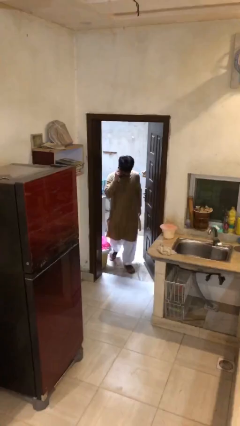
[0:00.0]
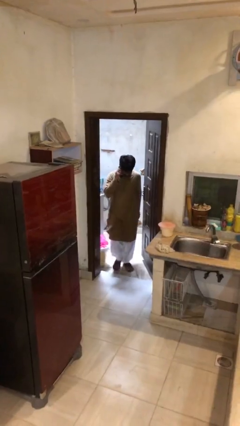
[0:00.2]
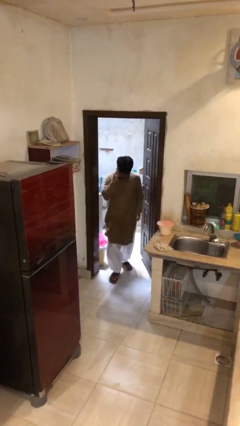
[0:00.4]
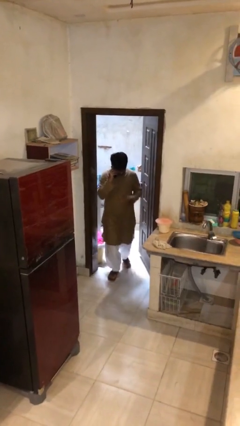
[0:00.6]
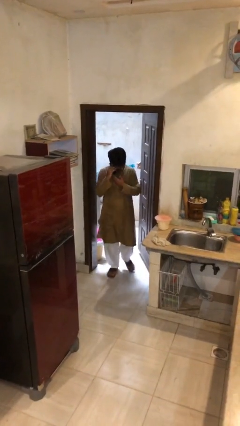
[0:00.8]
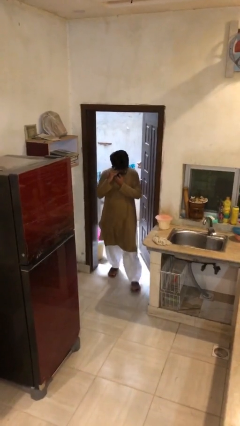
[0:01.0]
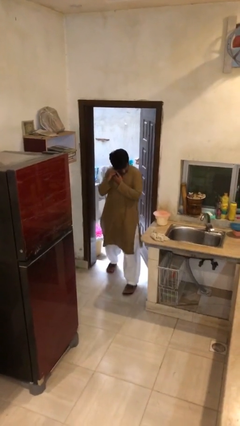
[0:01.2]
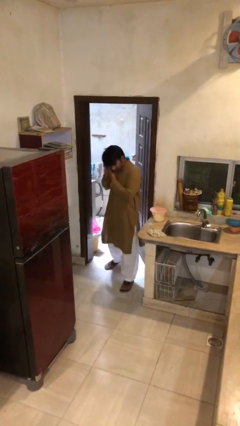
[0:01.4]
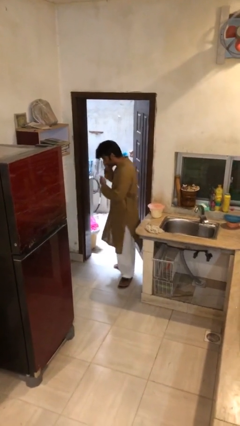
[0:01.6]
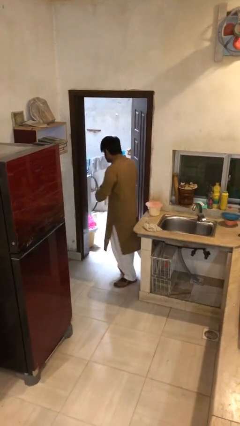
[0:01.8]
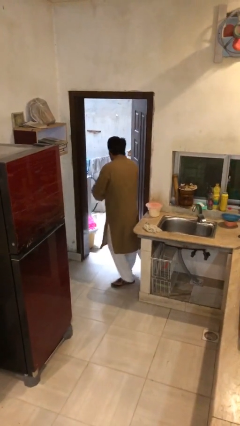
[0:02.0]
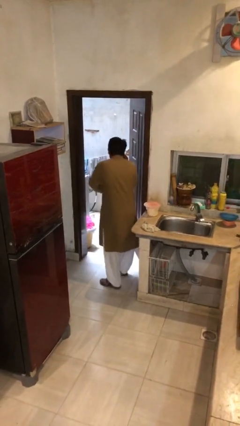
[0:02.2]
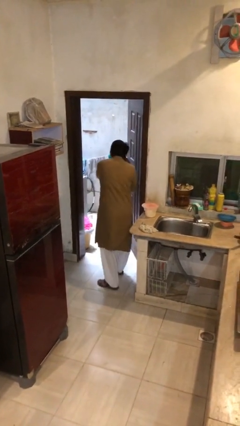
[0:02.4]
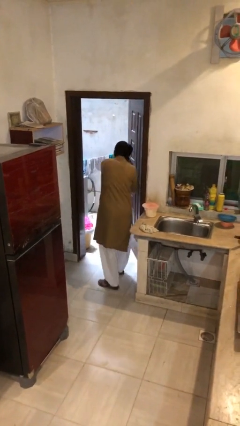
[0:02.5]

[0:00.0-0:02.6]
person enters scene through structure

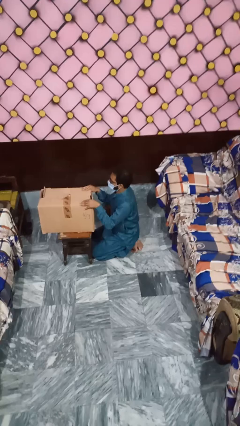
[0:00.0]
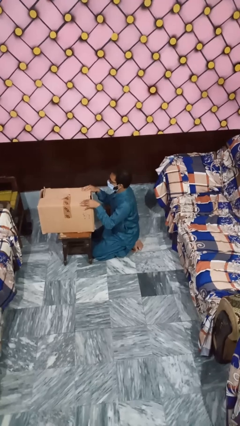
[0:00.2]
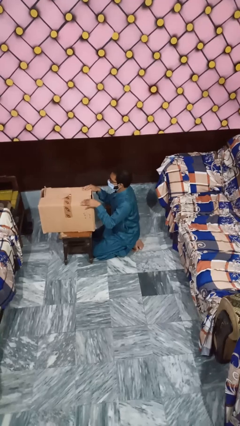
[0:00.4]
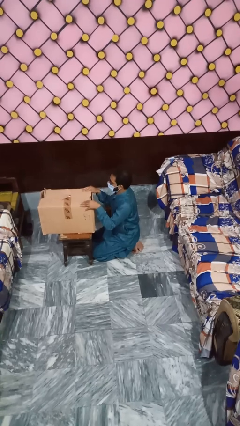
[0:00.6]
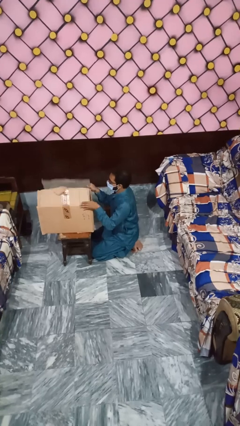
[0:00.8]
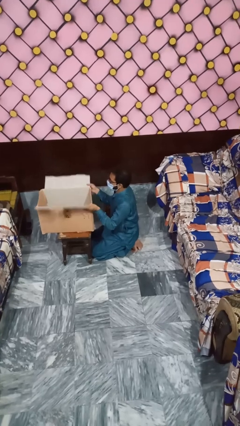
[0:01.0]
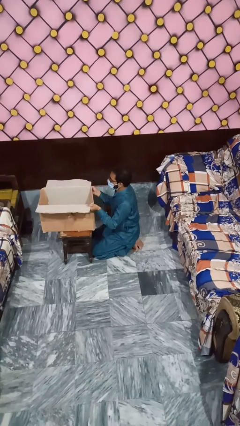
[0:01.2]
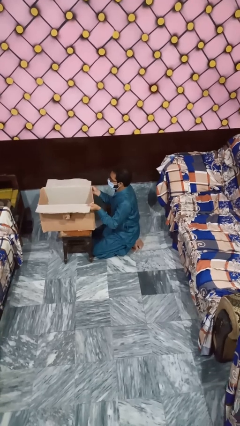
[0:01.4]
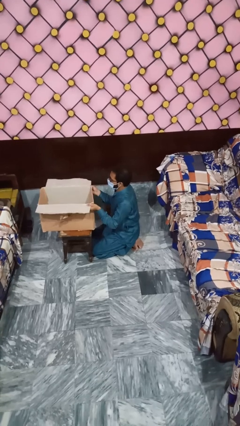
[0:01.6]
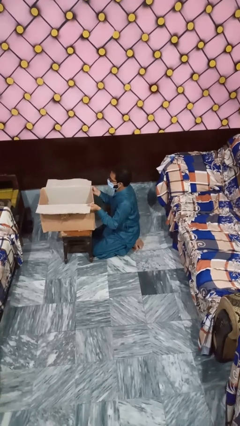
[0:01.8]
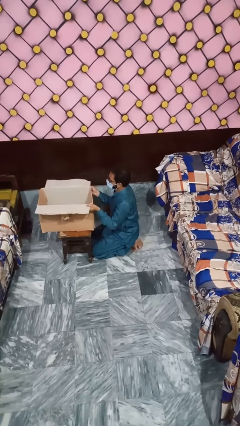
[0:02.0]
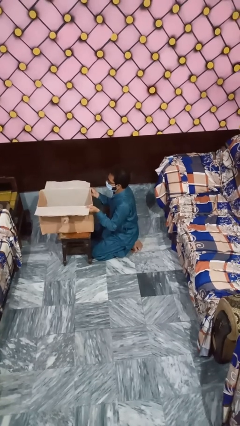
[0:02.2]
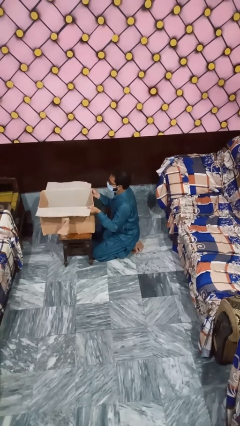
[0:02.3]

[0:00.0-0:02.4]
person opens box

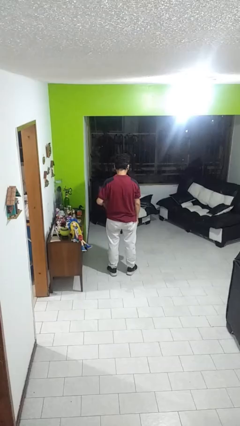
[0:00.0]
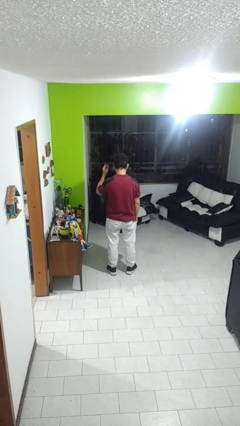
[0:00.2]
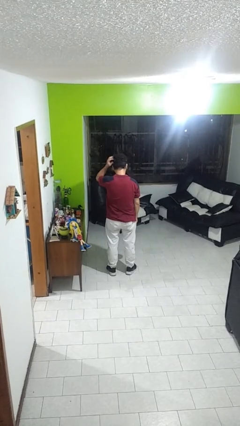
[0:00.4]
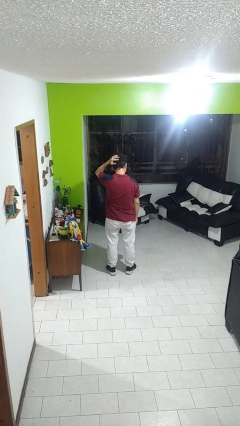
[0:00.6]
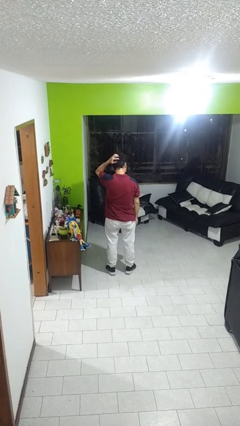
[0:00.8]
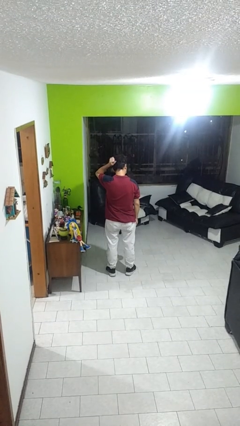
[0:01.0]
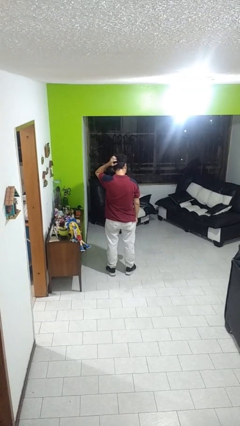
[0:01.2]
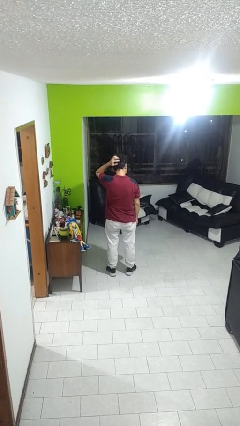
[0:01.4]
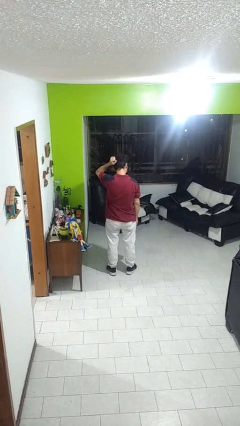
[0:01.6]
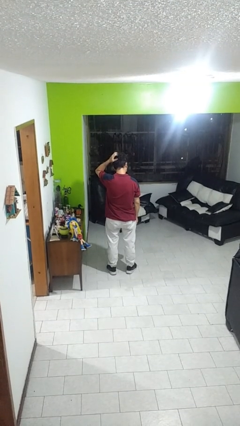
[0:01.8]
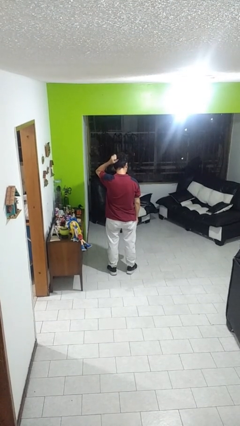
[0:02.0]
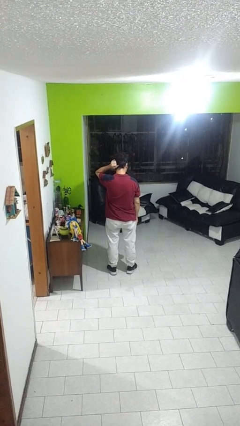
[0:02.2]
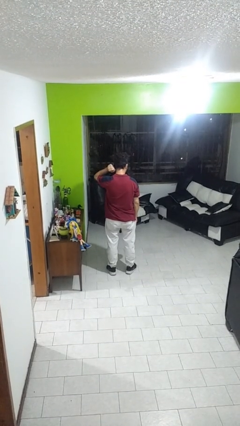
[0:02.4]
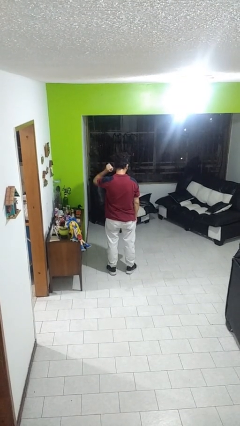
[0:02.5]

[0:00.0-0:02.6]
person scratches face

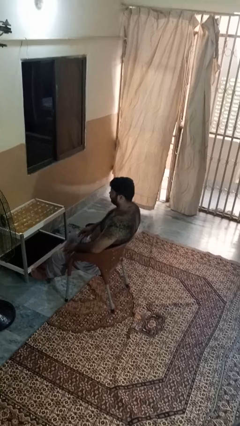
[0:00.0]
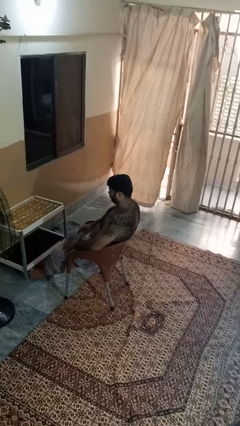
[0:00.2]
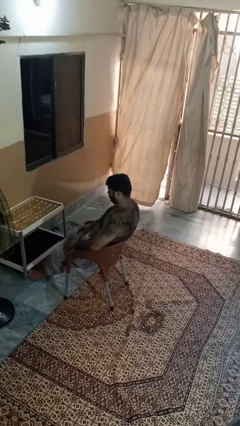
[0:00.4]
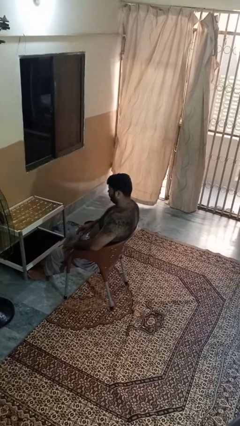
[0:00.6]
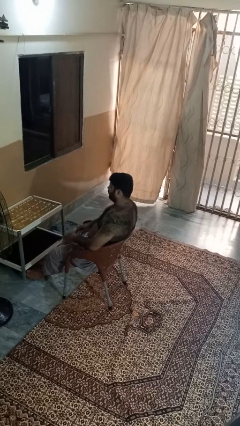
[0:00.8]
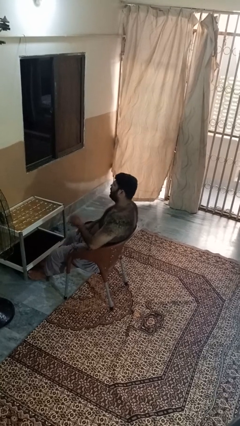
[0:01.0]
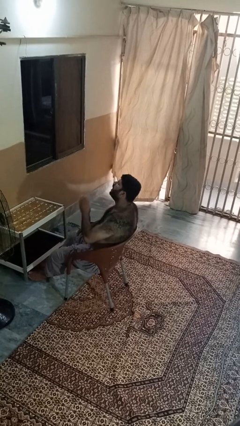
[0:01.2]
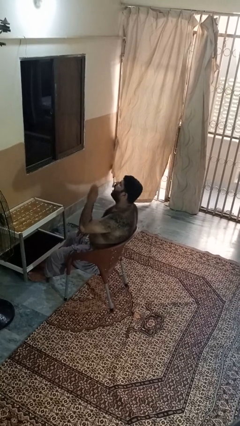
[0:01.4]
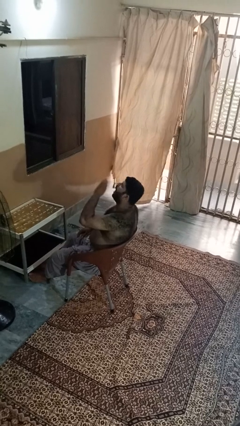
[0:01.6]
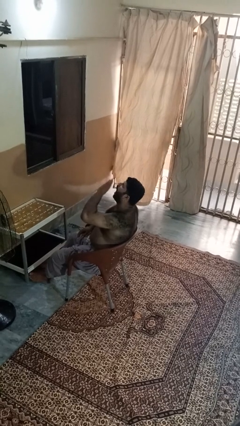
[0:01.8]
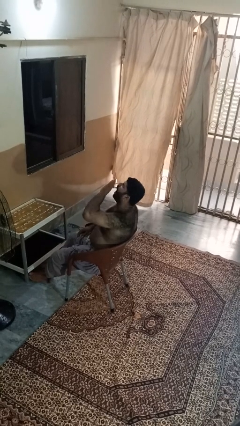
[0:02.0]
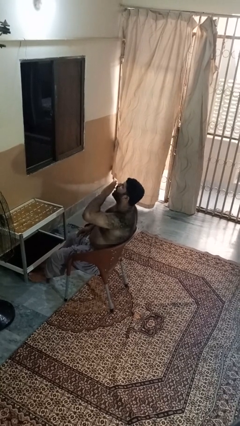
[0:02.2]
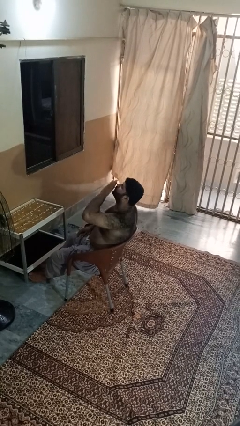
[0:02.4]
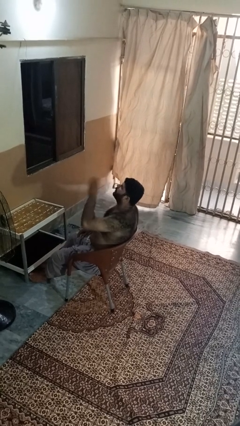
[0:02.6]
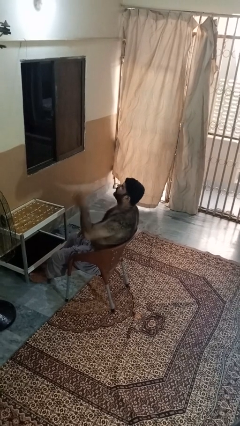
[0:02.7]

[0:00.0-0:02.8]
person yawns

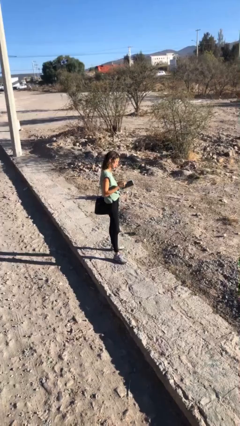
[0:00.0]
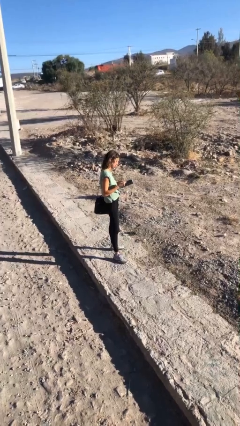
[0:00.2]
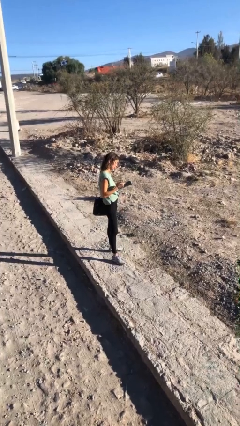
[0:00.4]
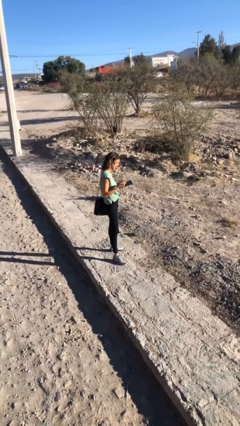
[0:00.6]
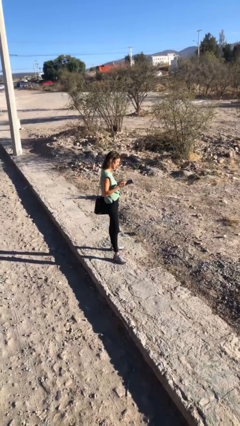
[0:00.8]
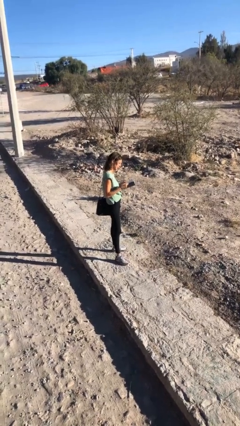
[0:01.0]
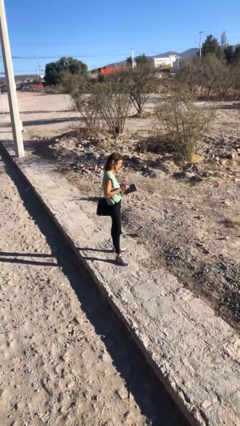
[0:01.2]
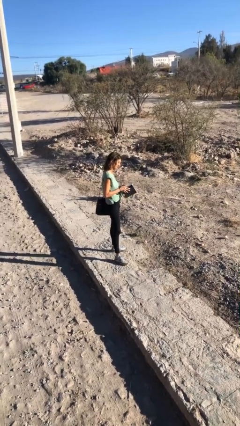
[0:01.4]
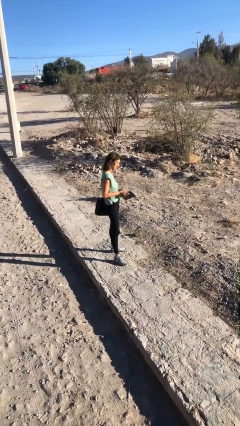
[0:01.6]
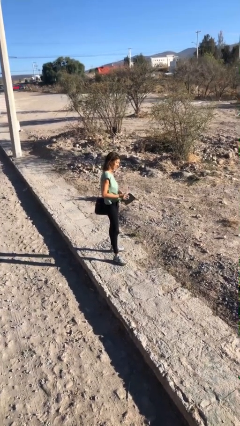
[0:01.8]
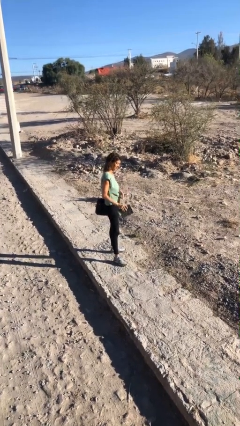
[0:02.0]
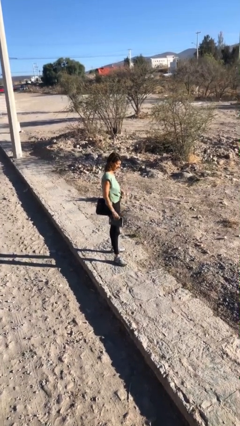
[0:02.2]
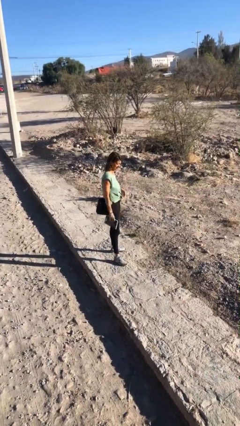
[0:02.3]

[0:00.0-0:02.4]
person reads document

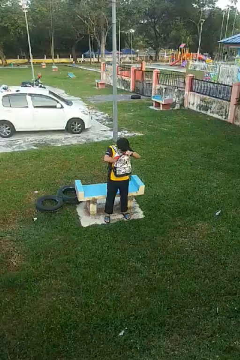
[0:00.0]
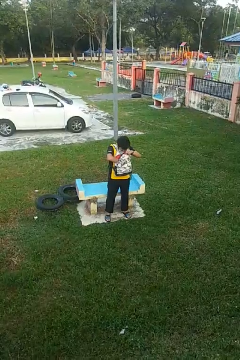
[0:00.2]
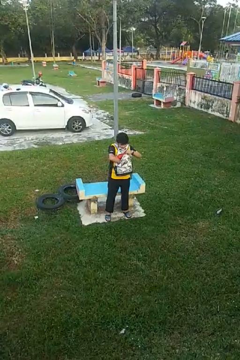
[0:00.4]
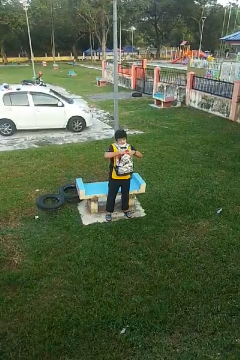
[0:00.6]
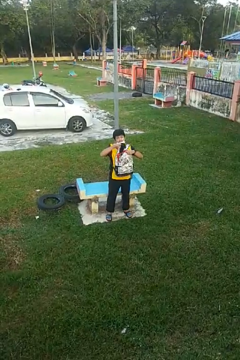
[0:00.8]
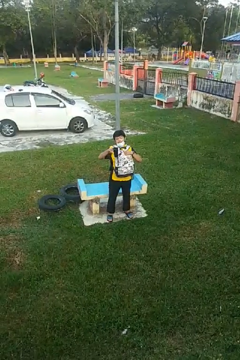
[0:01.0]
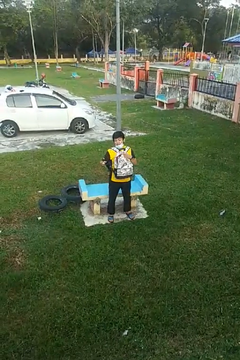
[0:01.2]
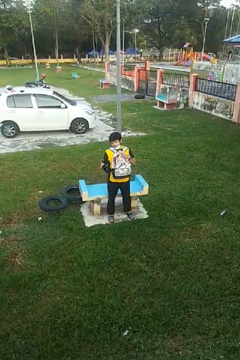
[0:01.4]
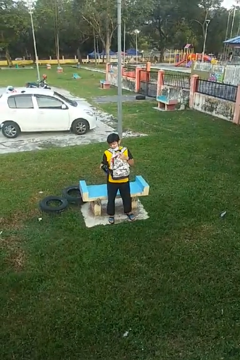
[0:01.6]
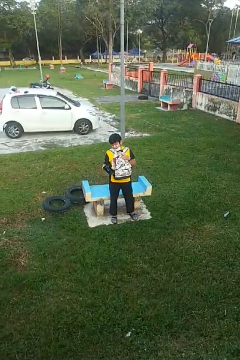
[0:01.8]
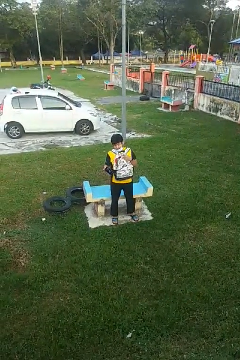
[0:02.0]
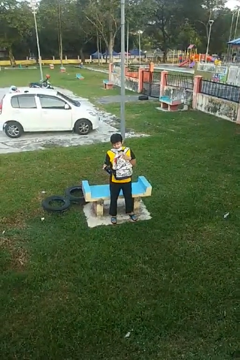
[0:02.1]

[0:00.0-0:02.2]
person takes object from backpack

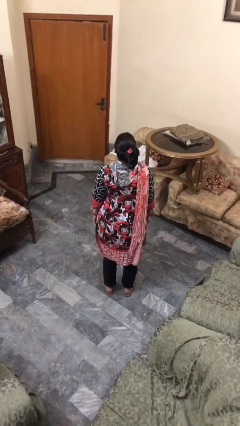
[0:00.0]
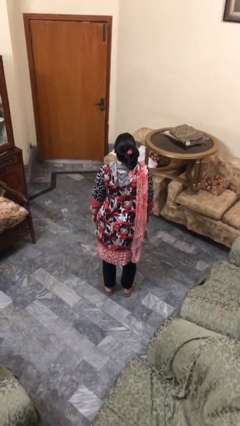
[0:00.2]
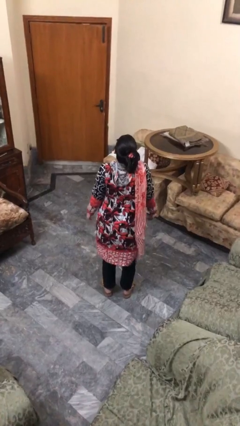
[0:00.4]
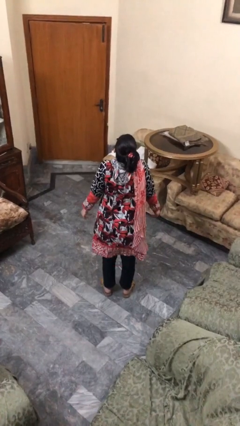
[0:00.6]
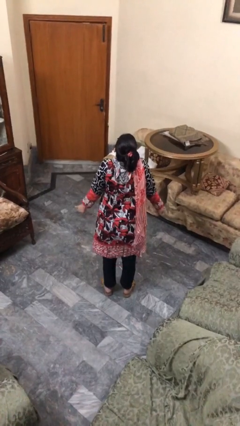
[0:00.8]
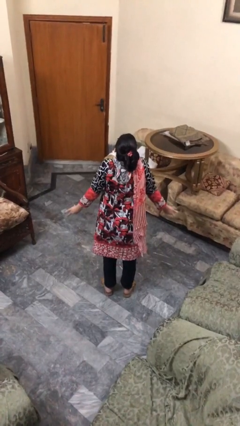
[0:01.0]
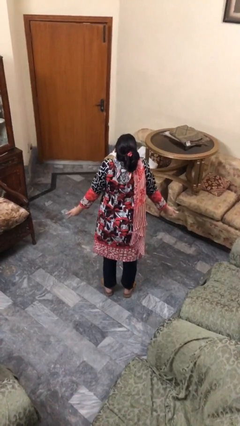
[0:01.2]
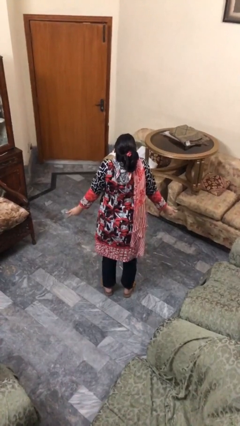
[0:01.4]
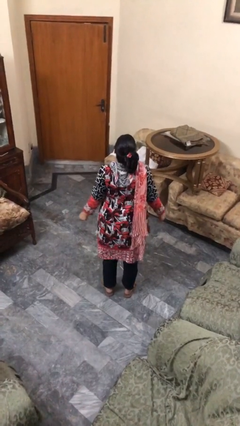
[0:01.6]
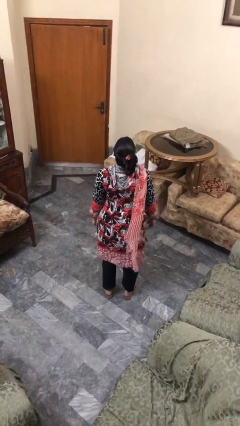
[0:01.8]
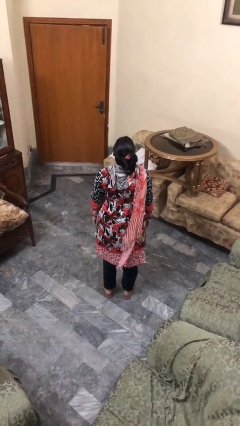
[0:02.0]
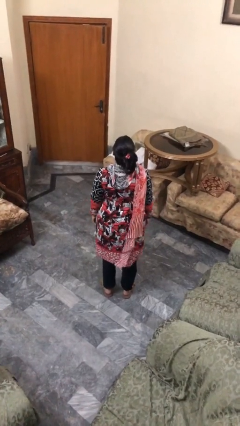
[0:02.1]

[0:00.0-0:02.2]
person shrugs

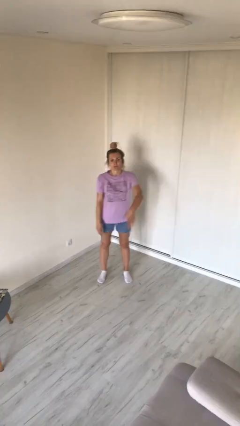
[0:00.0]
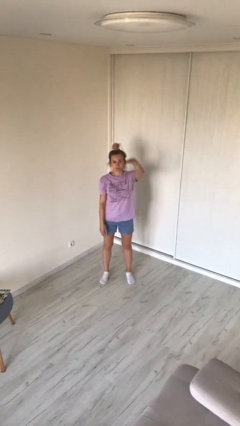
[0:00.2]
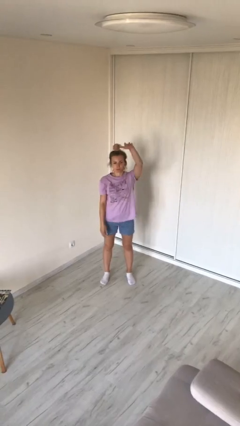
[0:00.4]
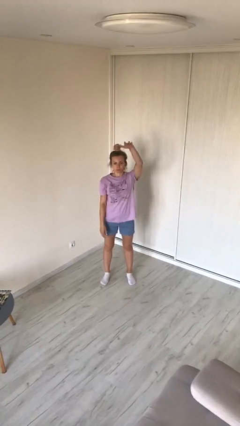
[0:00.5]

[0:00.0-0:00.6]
person gestures swipe up
